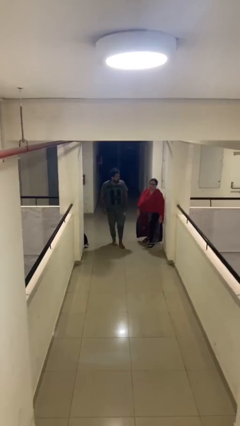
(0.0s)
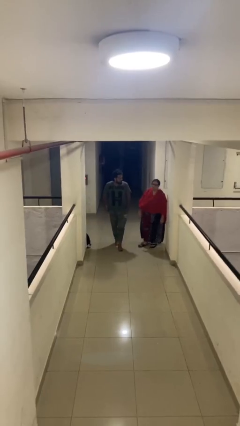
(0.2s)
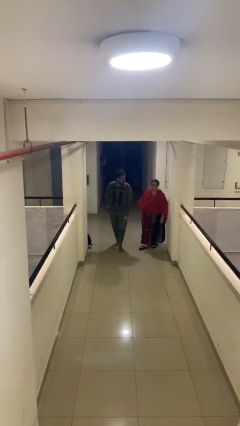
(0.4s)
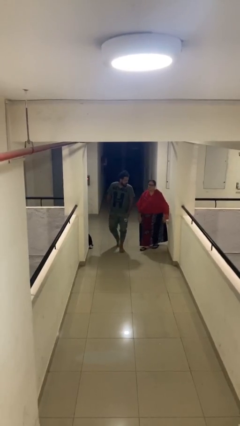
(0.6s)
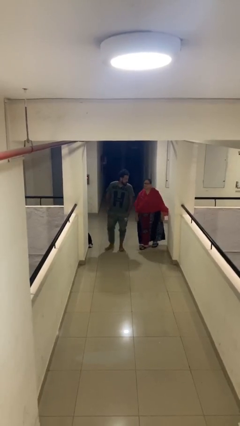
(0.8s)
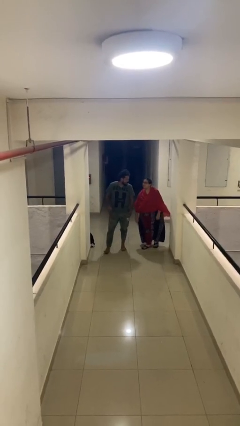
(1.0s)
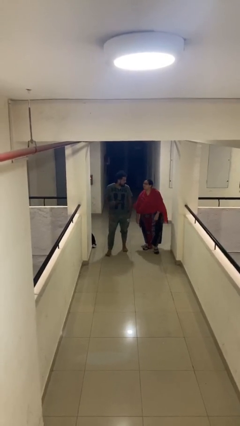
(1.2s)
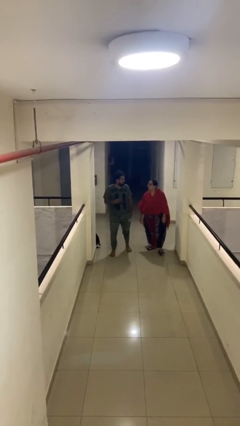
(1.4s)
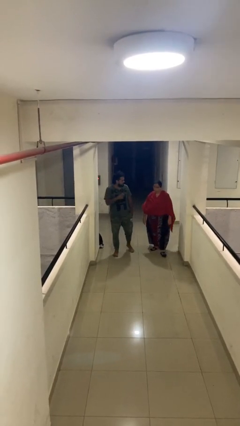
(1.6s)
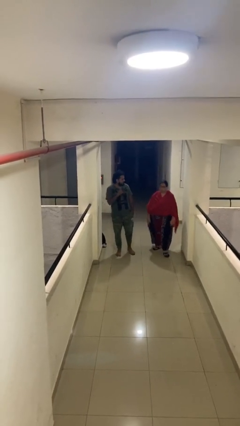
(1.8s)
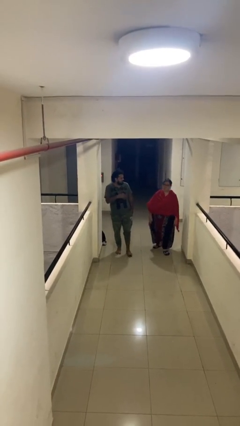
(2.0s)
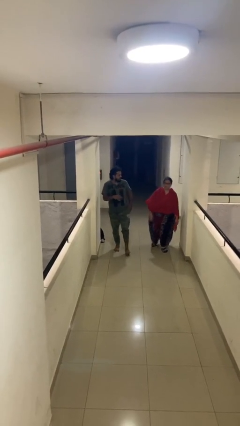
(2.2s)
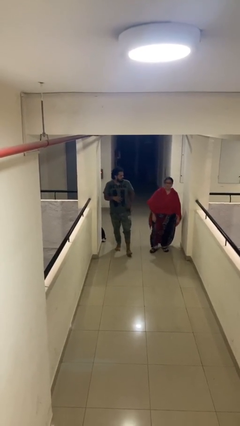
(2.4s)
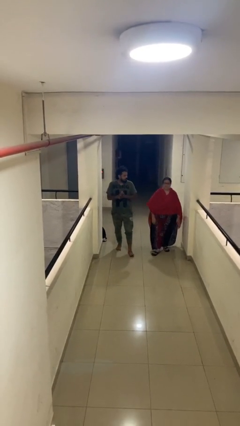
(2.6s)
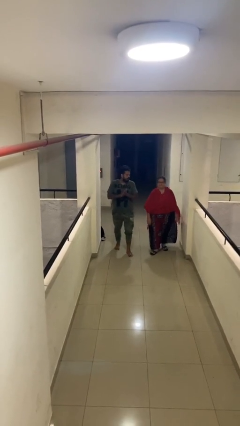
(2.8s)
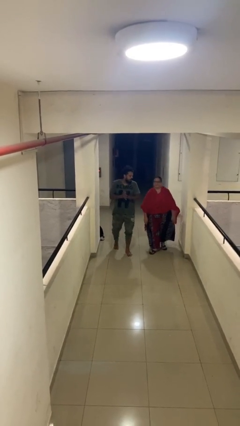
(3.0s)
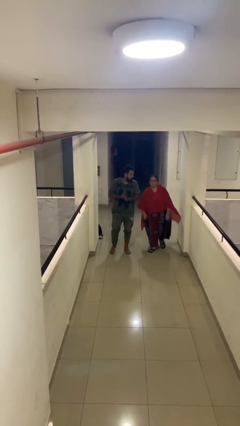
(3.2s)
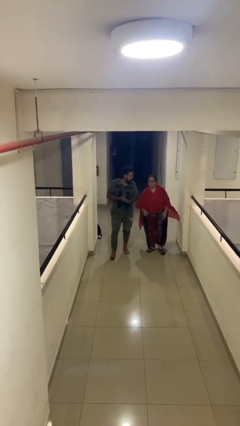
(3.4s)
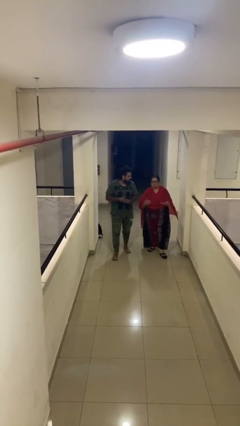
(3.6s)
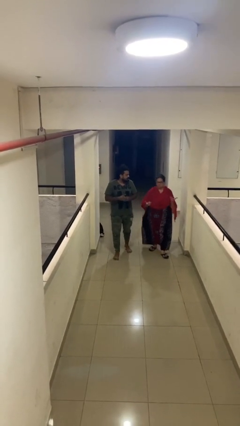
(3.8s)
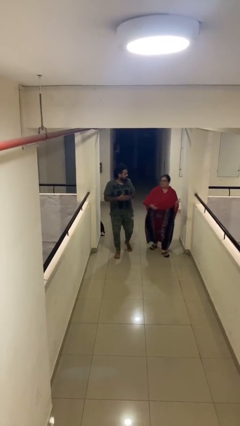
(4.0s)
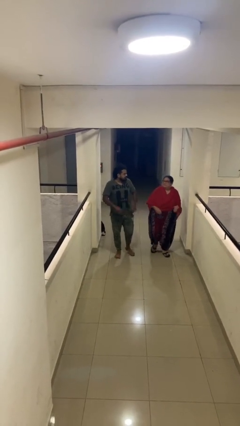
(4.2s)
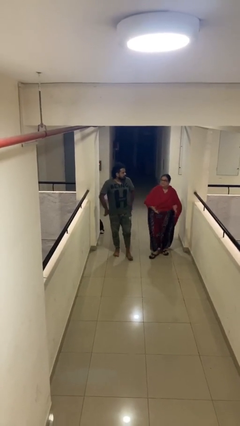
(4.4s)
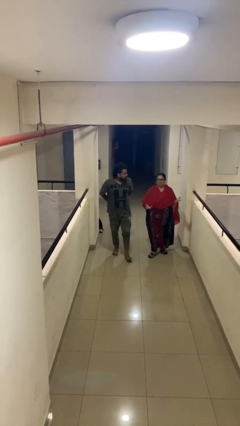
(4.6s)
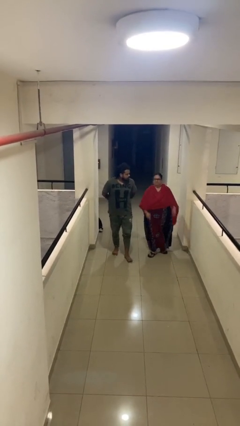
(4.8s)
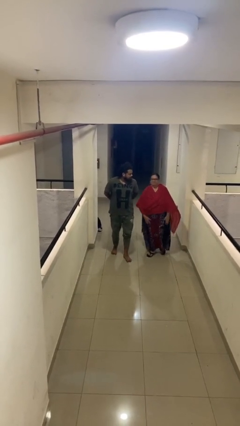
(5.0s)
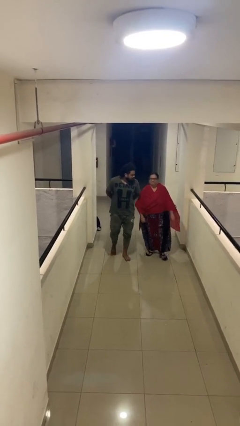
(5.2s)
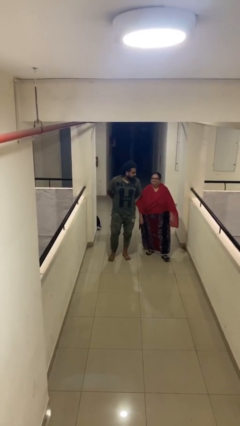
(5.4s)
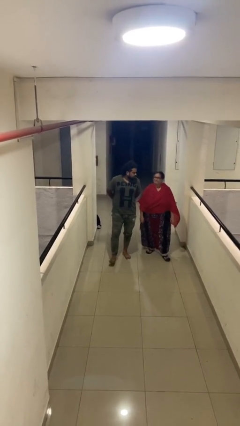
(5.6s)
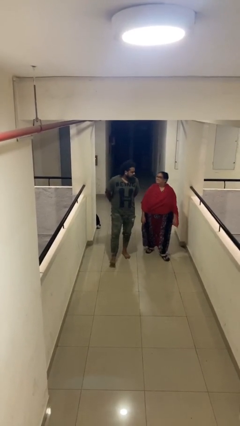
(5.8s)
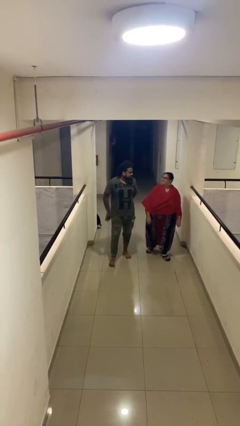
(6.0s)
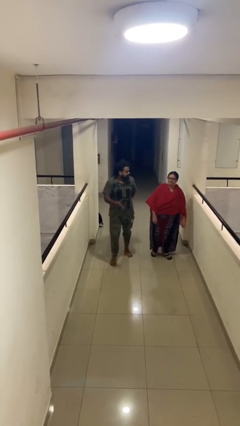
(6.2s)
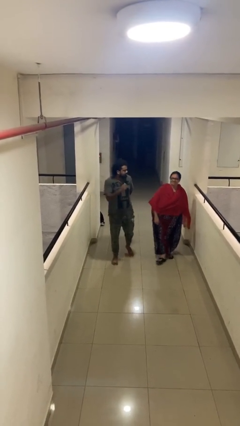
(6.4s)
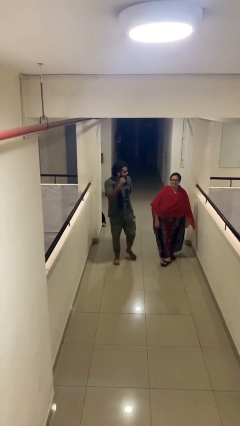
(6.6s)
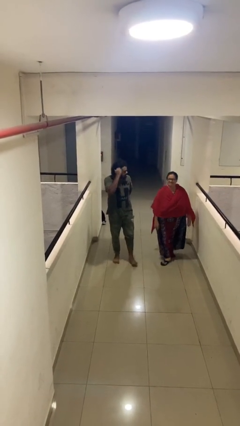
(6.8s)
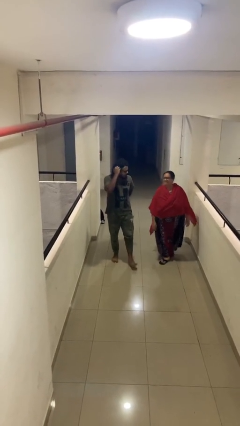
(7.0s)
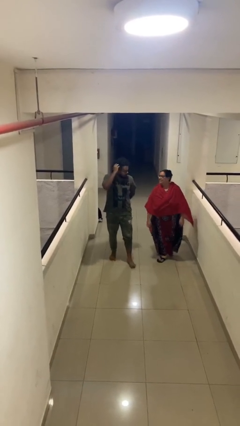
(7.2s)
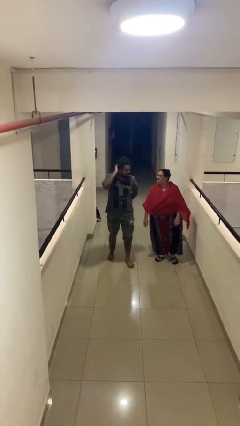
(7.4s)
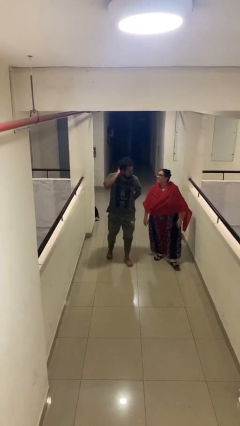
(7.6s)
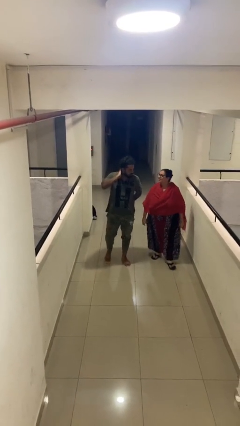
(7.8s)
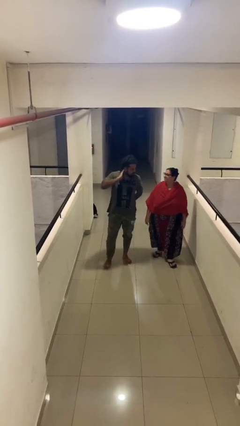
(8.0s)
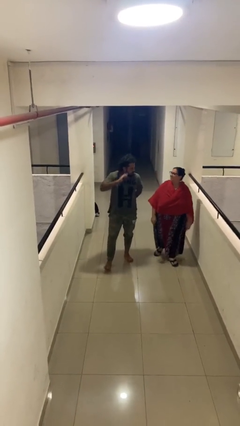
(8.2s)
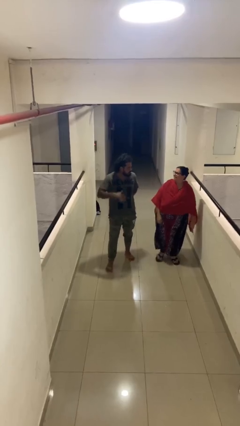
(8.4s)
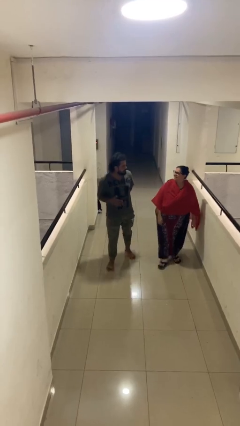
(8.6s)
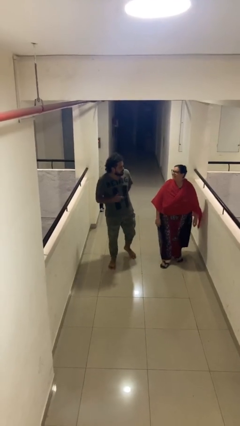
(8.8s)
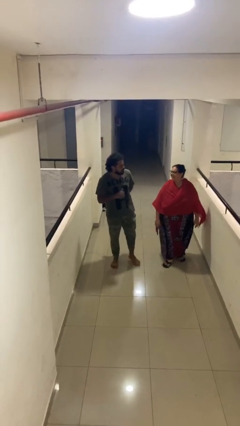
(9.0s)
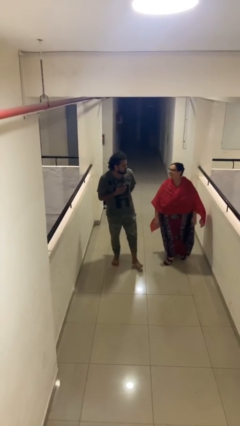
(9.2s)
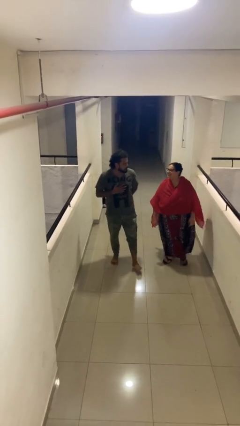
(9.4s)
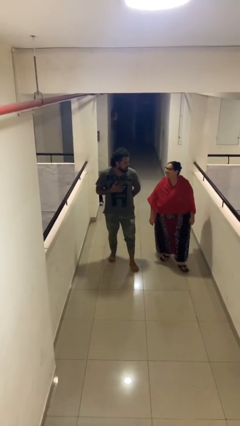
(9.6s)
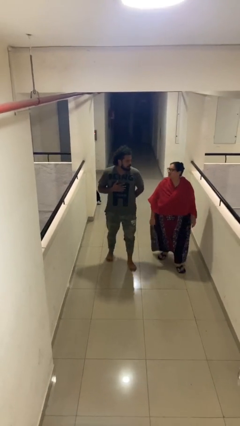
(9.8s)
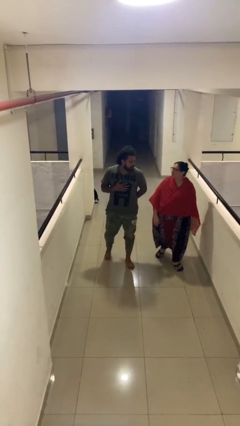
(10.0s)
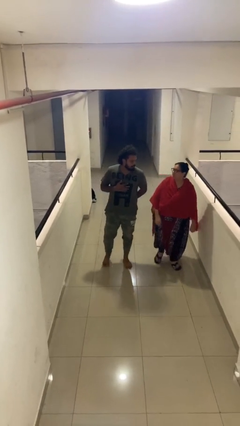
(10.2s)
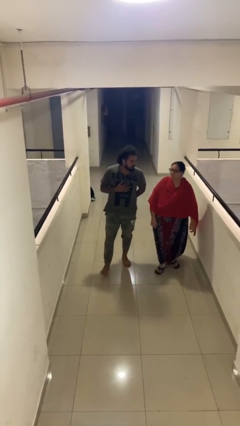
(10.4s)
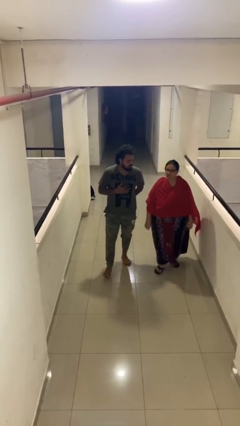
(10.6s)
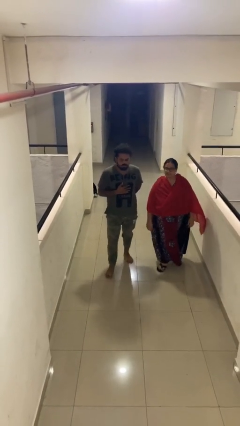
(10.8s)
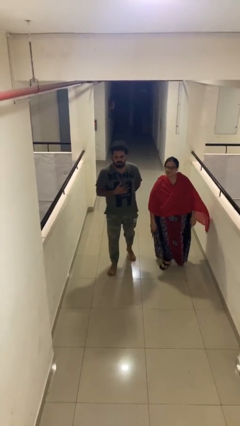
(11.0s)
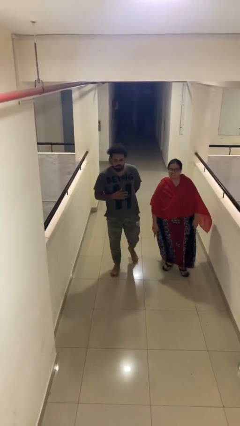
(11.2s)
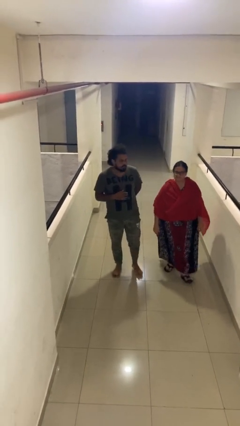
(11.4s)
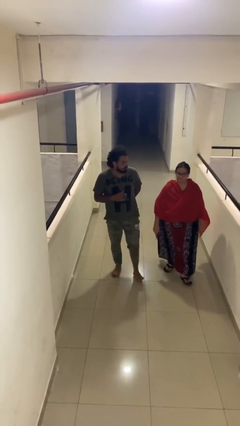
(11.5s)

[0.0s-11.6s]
person talks to person

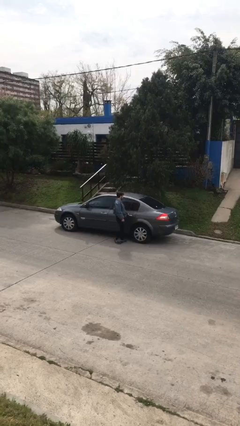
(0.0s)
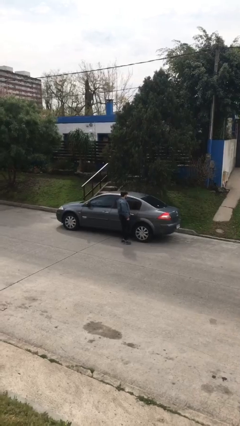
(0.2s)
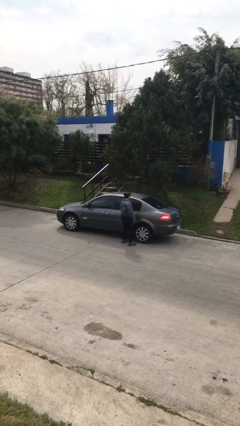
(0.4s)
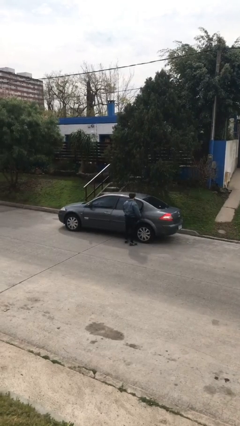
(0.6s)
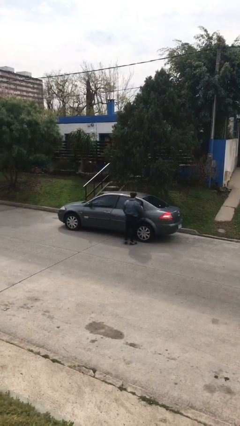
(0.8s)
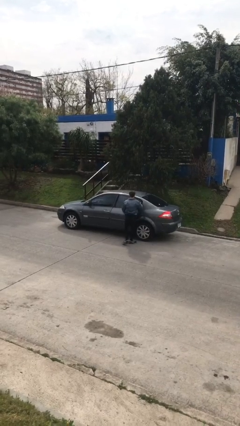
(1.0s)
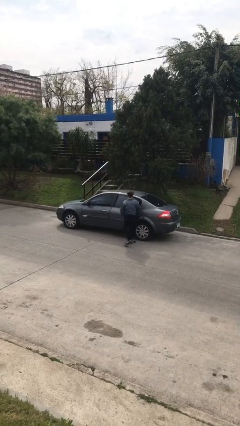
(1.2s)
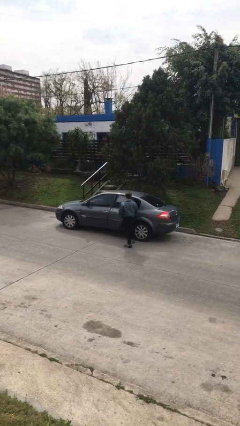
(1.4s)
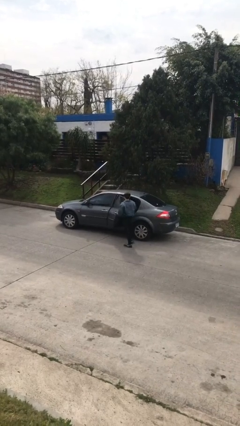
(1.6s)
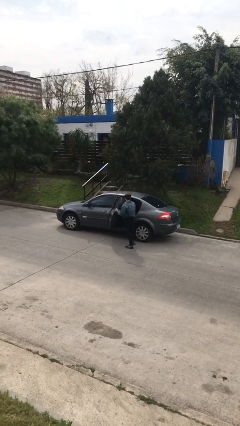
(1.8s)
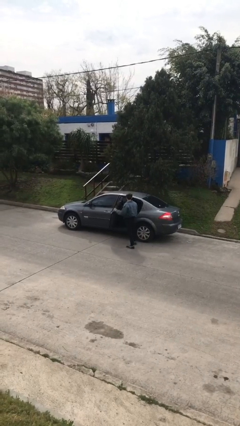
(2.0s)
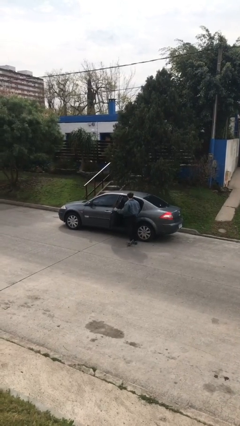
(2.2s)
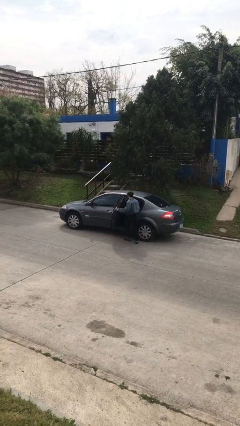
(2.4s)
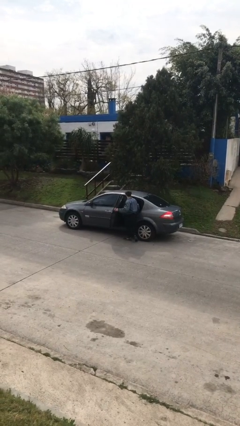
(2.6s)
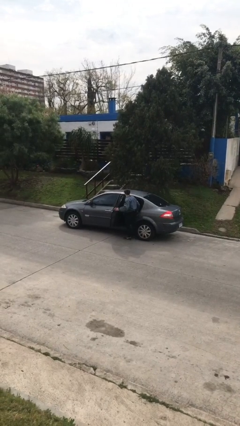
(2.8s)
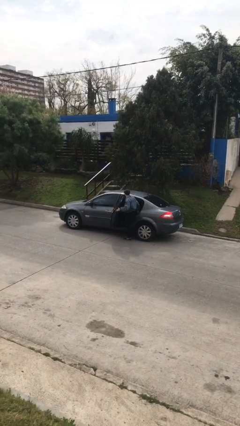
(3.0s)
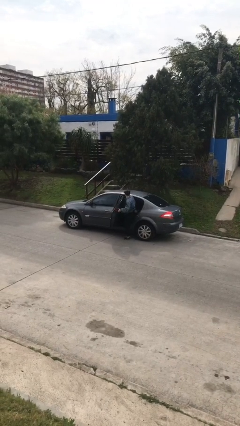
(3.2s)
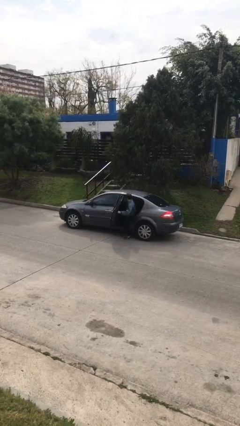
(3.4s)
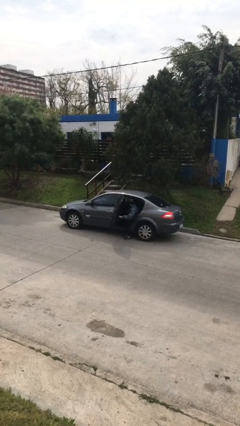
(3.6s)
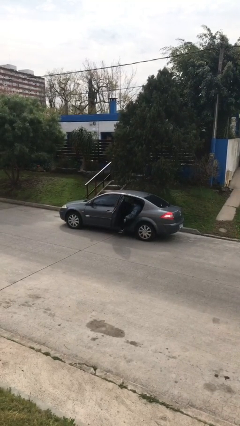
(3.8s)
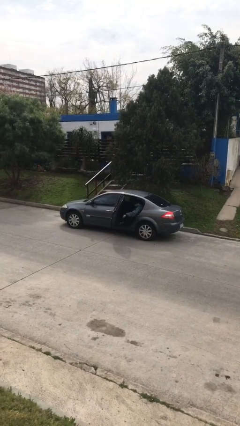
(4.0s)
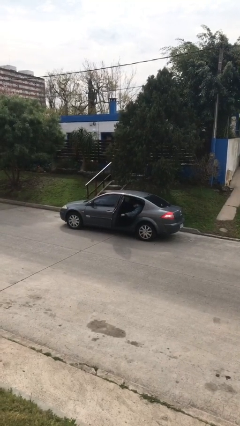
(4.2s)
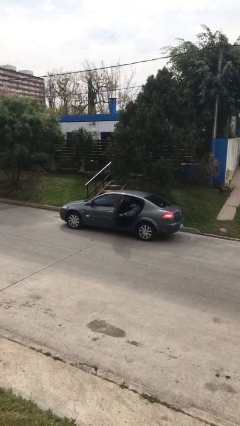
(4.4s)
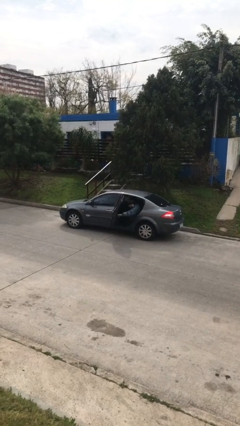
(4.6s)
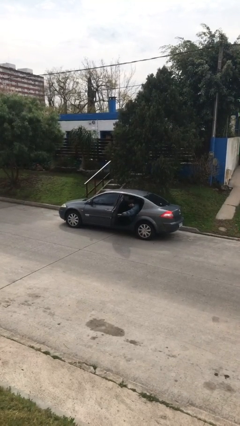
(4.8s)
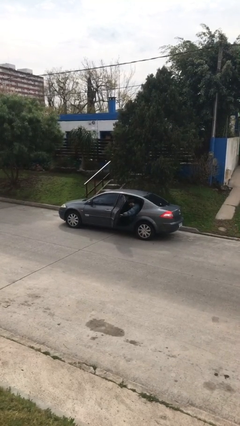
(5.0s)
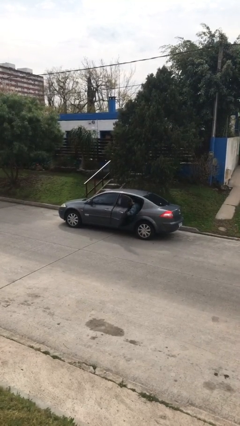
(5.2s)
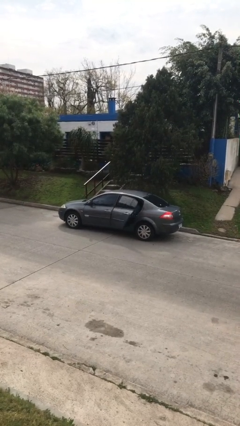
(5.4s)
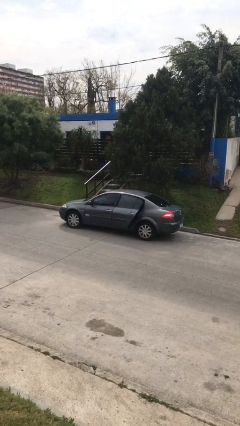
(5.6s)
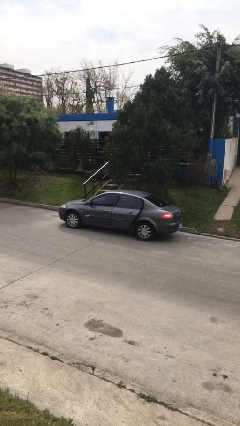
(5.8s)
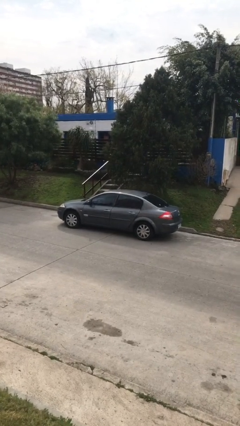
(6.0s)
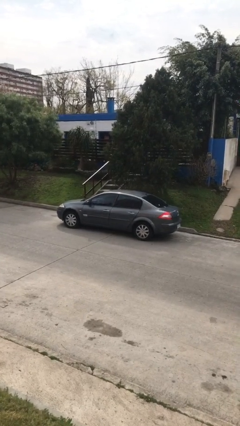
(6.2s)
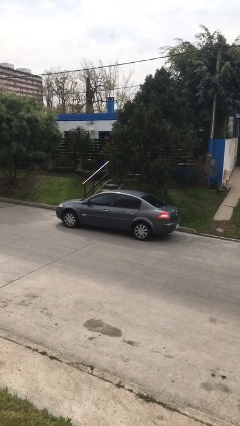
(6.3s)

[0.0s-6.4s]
car picks up person
